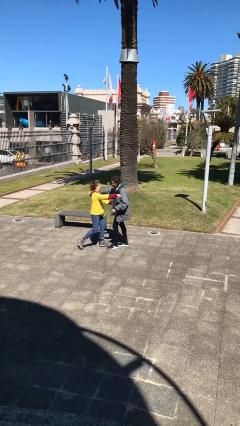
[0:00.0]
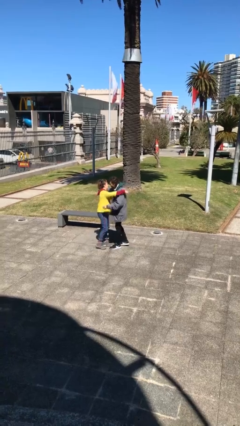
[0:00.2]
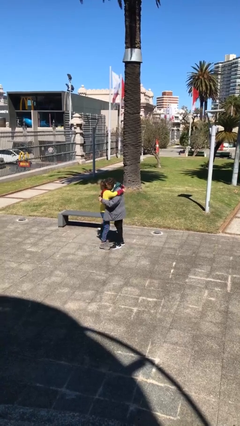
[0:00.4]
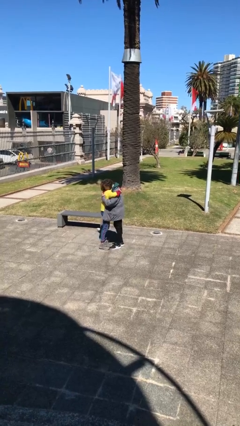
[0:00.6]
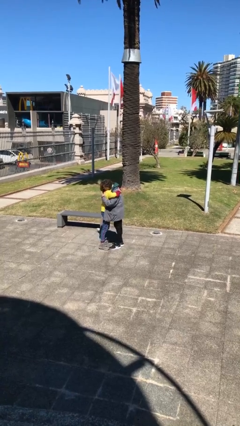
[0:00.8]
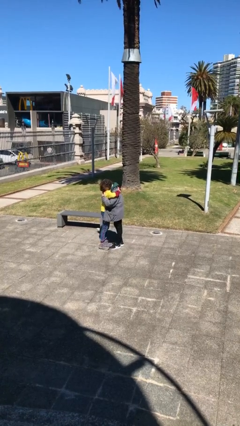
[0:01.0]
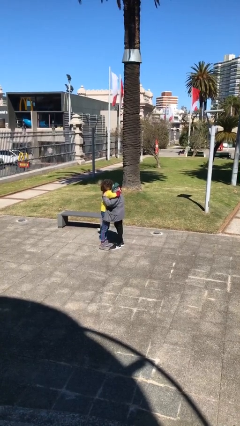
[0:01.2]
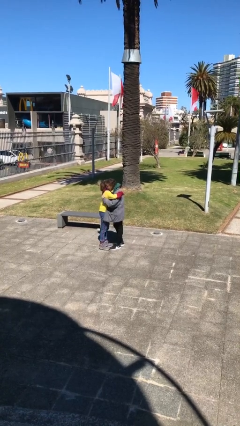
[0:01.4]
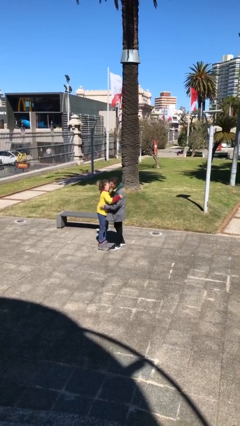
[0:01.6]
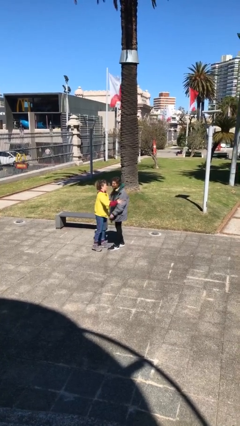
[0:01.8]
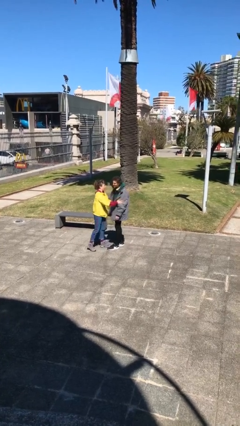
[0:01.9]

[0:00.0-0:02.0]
person embraces person

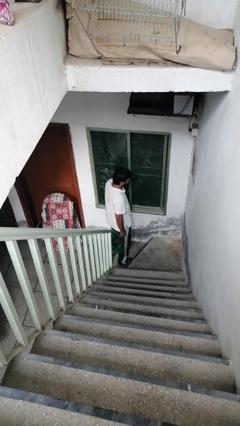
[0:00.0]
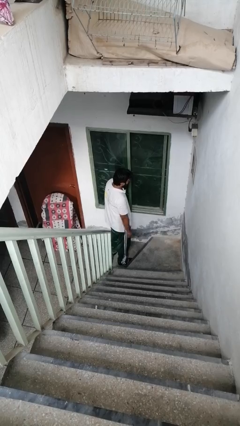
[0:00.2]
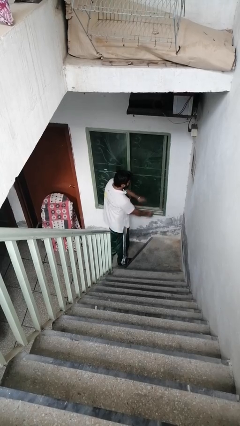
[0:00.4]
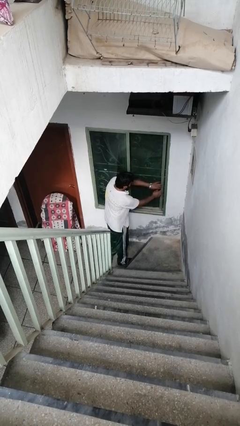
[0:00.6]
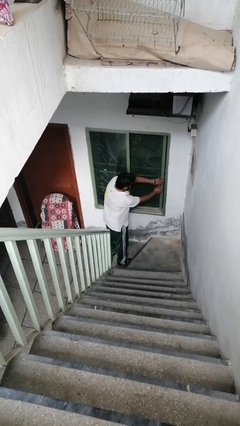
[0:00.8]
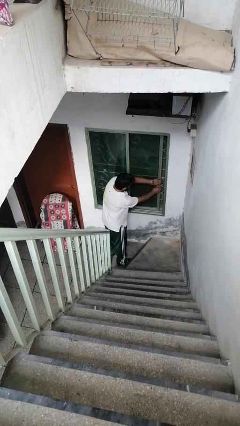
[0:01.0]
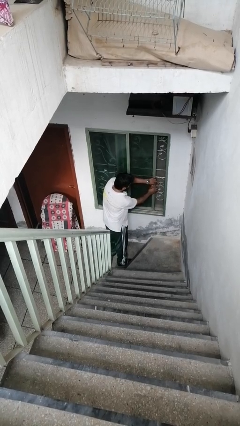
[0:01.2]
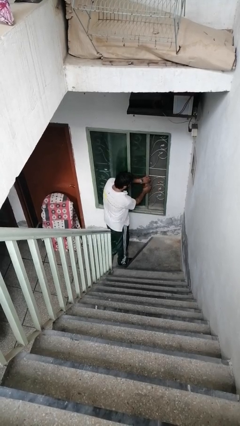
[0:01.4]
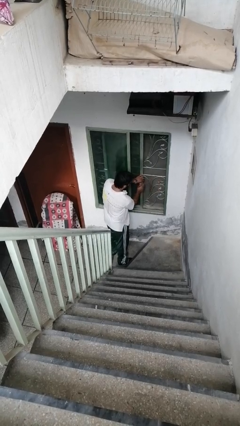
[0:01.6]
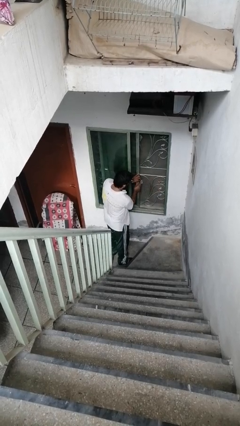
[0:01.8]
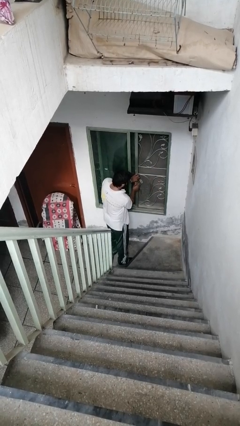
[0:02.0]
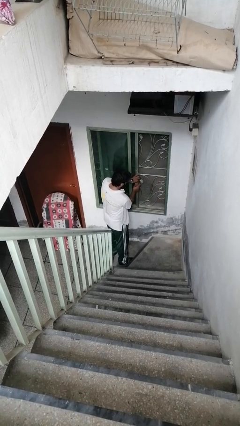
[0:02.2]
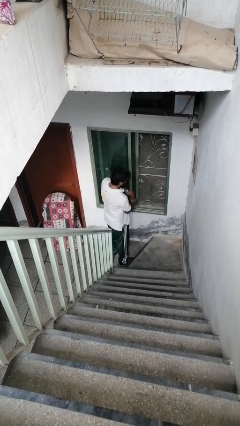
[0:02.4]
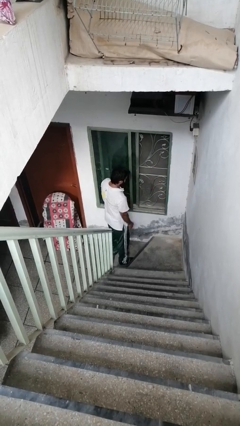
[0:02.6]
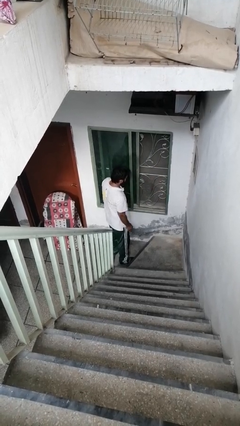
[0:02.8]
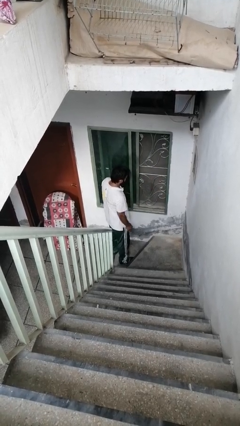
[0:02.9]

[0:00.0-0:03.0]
person opens home window

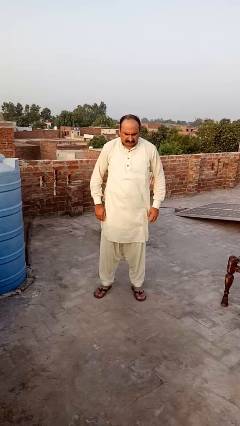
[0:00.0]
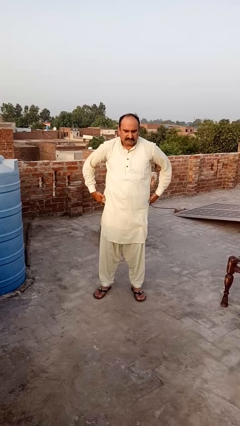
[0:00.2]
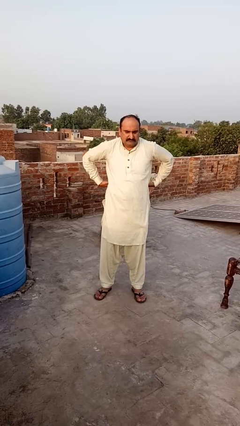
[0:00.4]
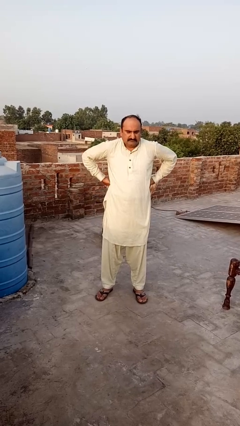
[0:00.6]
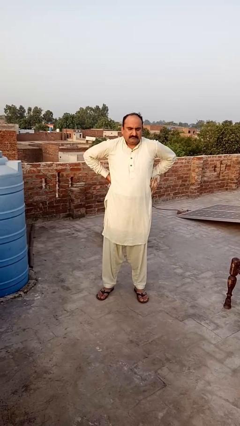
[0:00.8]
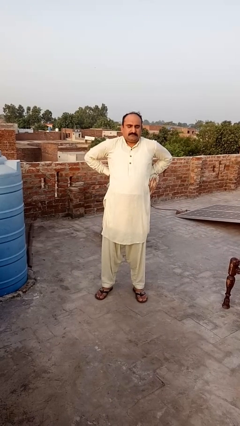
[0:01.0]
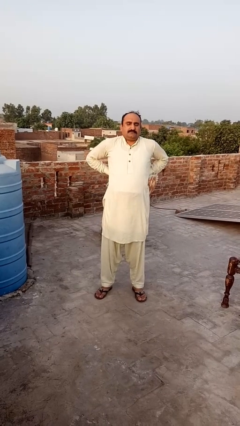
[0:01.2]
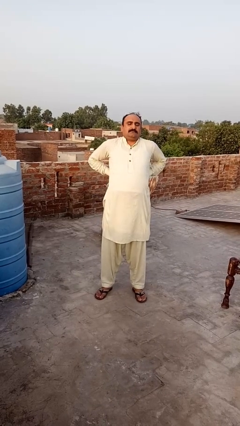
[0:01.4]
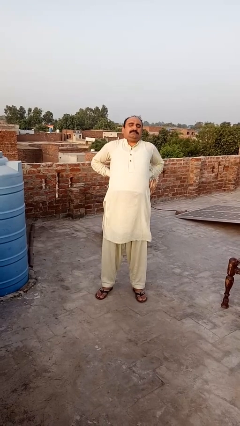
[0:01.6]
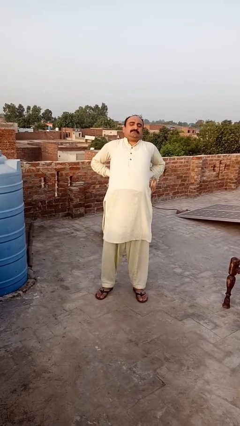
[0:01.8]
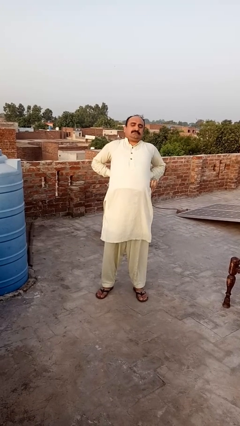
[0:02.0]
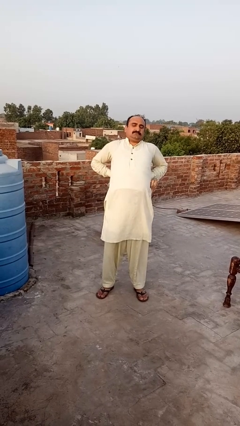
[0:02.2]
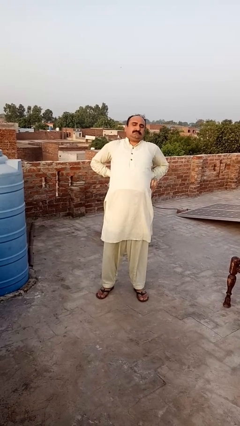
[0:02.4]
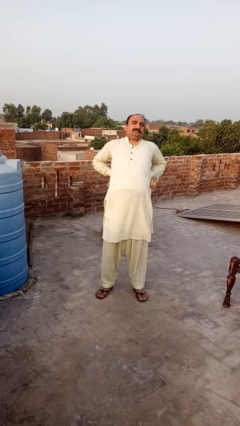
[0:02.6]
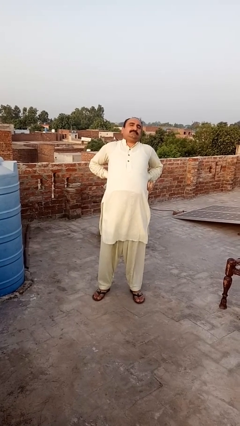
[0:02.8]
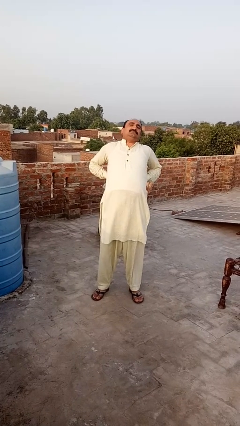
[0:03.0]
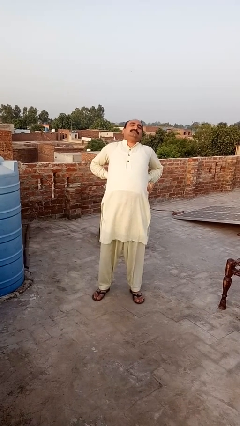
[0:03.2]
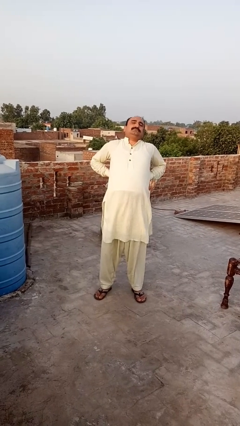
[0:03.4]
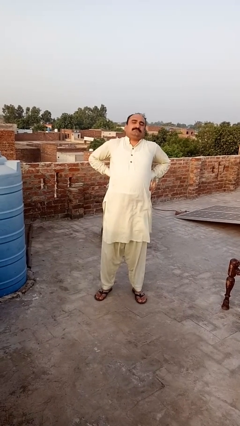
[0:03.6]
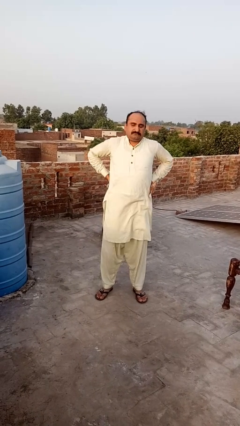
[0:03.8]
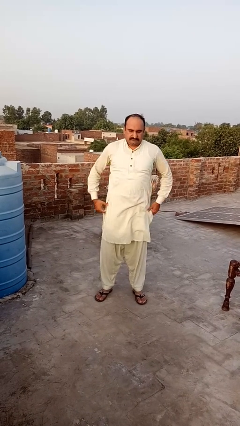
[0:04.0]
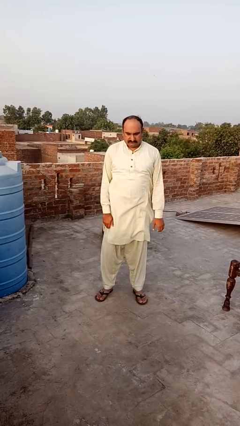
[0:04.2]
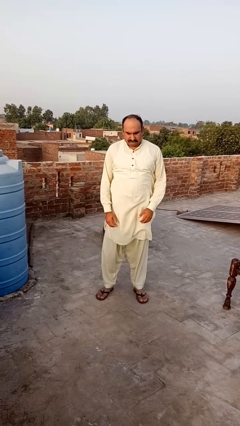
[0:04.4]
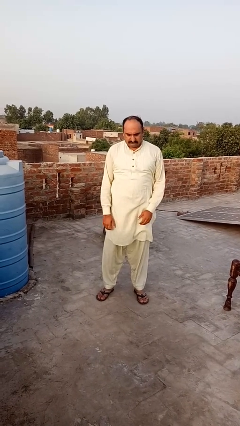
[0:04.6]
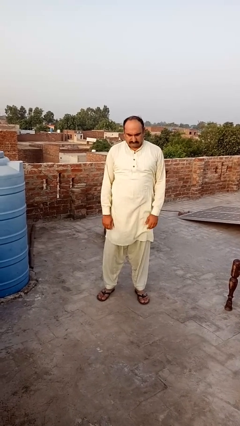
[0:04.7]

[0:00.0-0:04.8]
person stretches back

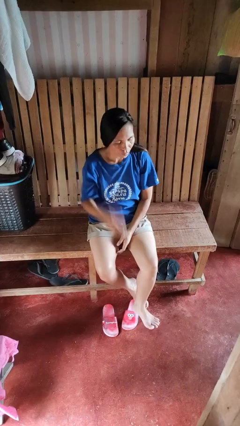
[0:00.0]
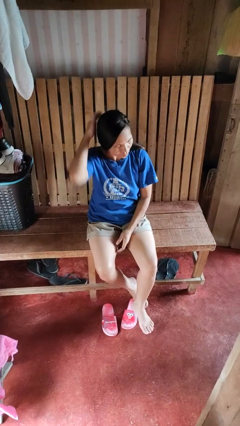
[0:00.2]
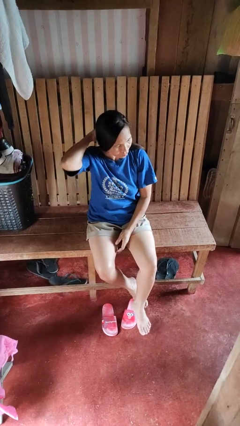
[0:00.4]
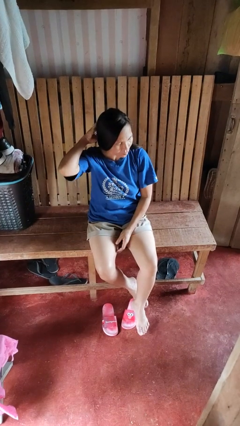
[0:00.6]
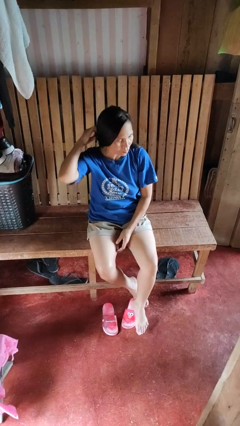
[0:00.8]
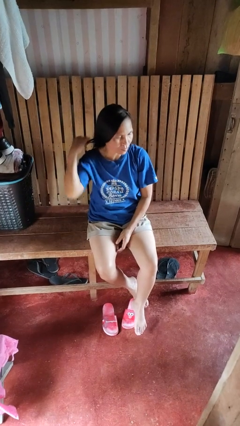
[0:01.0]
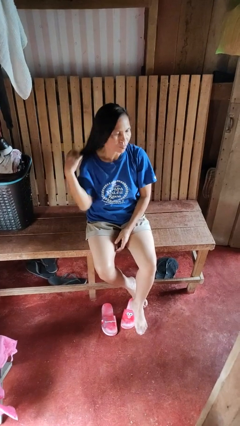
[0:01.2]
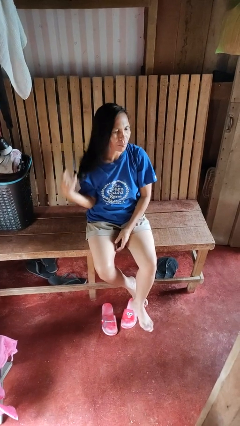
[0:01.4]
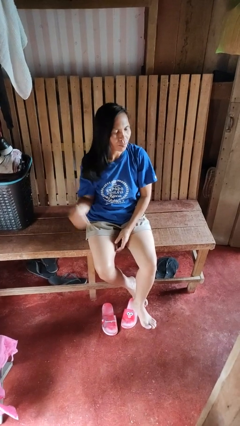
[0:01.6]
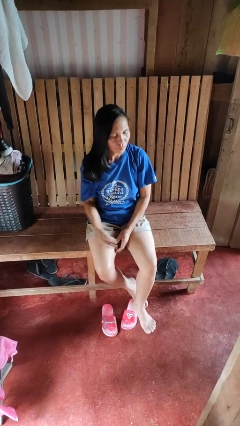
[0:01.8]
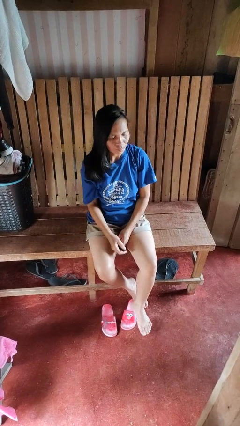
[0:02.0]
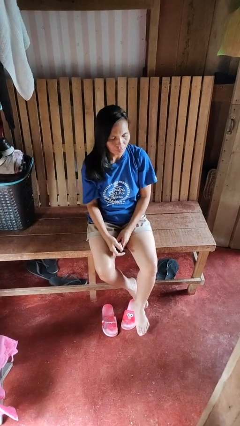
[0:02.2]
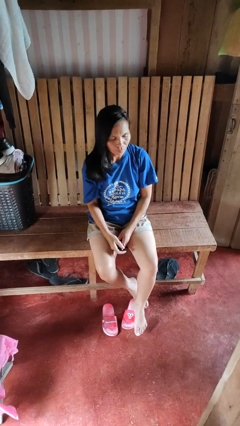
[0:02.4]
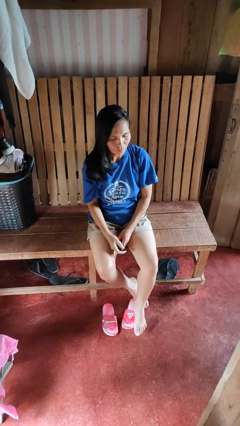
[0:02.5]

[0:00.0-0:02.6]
person takes off hairtie

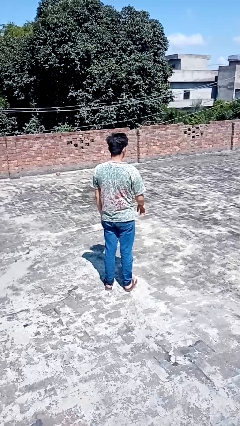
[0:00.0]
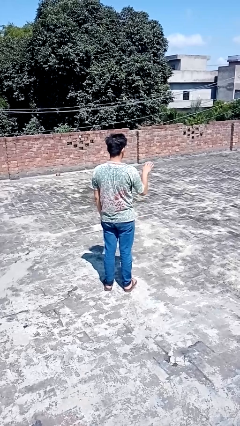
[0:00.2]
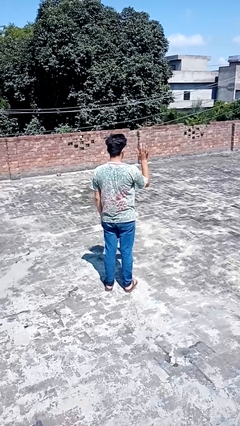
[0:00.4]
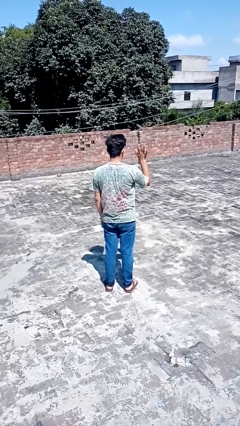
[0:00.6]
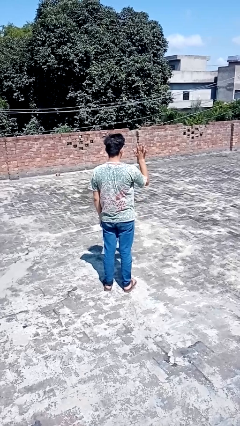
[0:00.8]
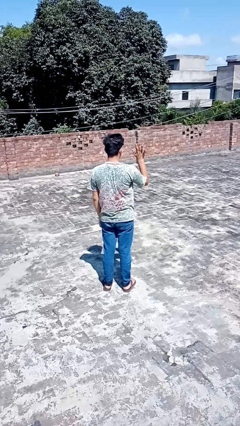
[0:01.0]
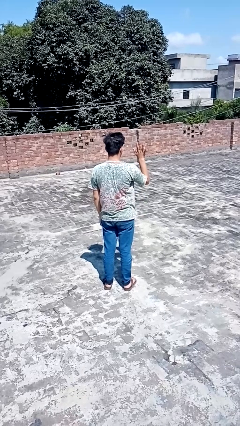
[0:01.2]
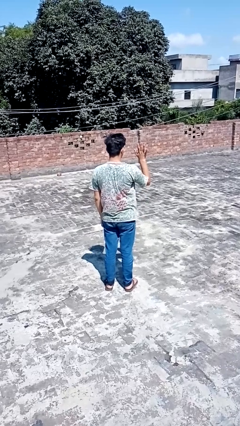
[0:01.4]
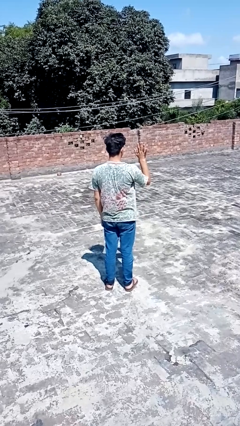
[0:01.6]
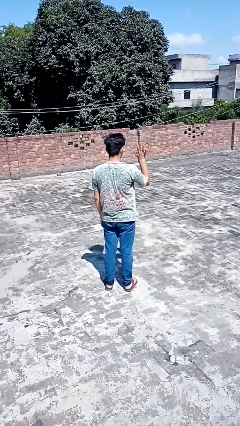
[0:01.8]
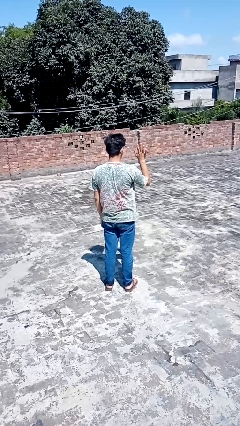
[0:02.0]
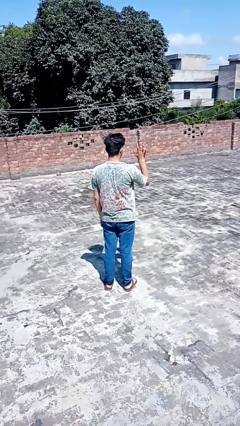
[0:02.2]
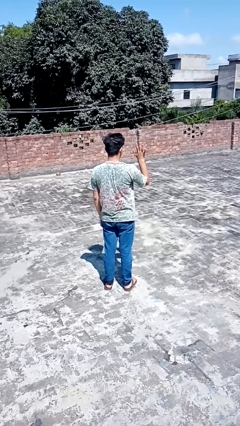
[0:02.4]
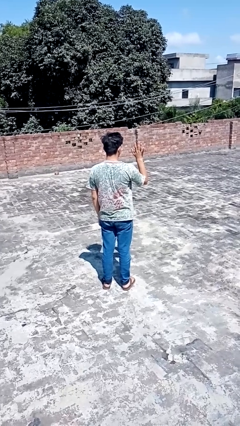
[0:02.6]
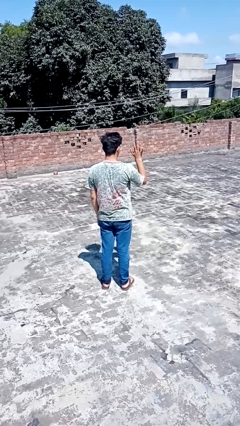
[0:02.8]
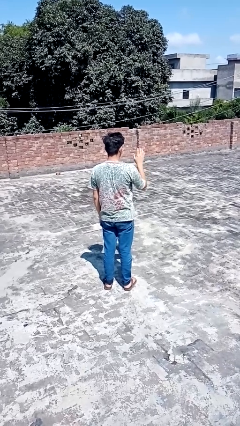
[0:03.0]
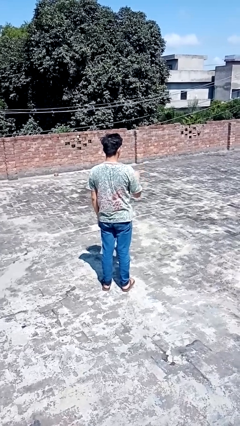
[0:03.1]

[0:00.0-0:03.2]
person gestures number five

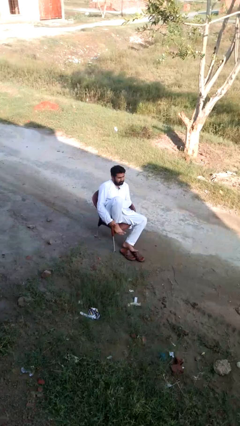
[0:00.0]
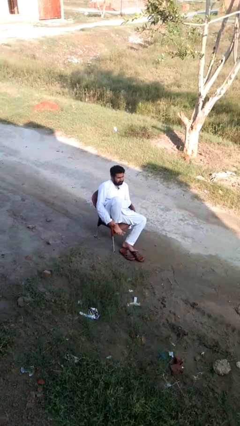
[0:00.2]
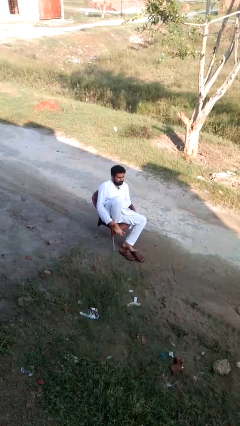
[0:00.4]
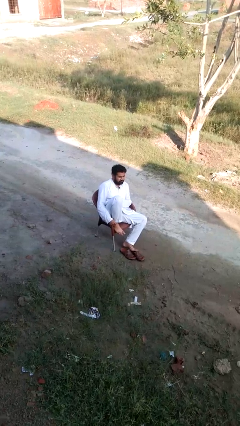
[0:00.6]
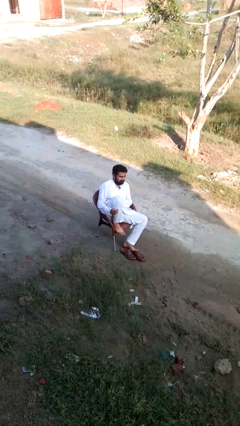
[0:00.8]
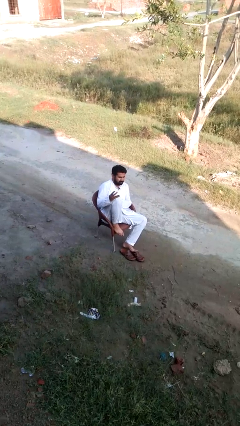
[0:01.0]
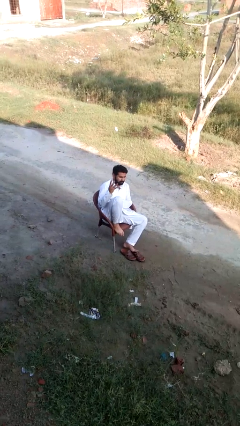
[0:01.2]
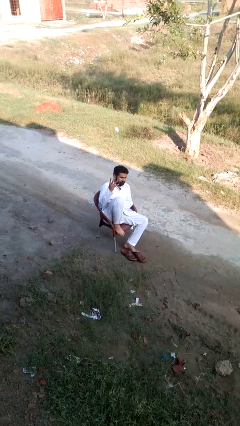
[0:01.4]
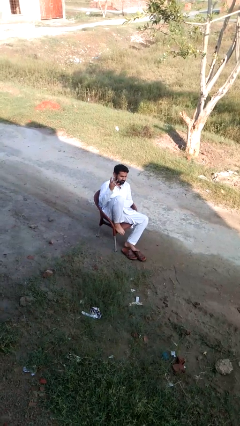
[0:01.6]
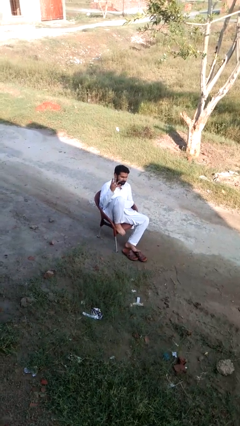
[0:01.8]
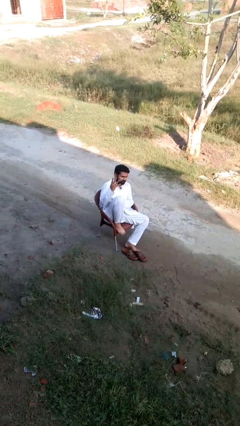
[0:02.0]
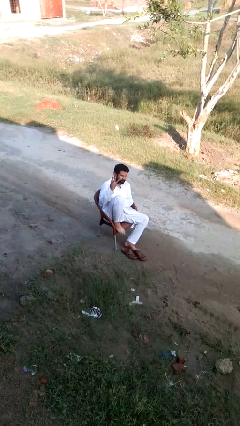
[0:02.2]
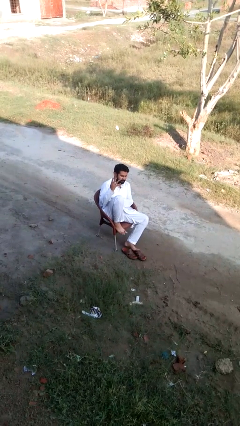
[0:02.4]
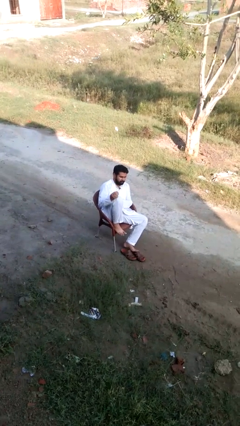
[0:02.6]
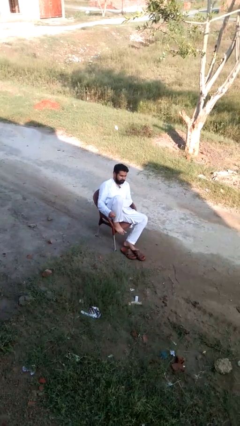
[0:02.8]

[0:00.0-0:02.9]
person gestures number four
